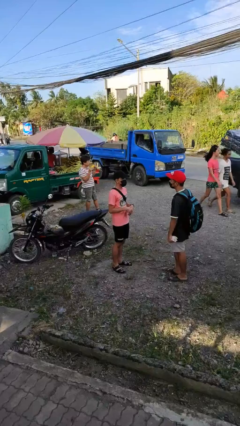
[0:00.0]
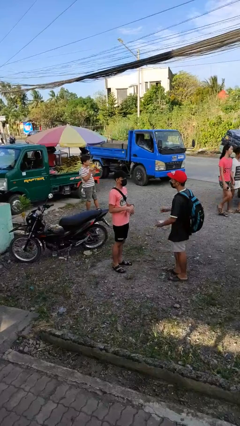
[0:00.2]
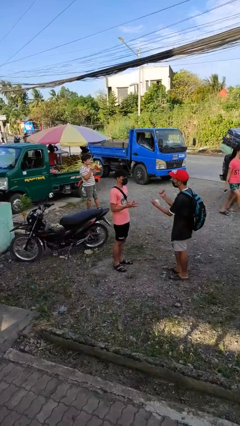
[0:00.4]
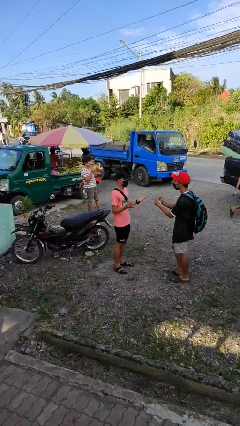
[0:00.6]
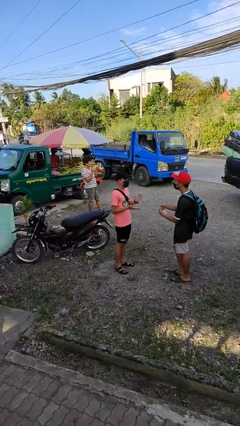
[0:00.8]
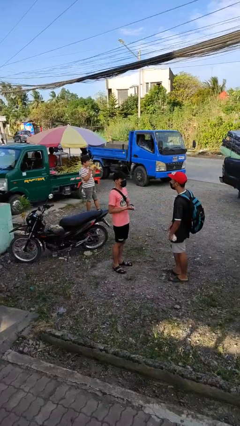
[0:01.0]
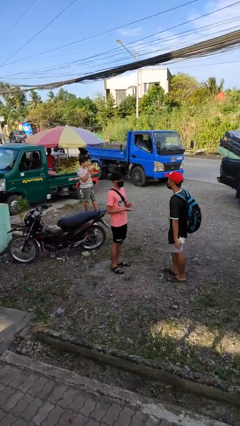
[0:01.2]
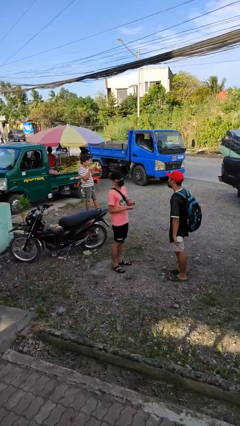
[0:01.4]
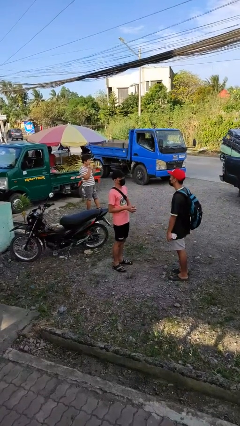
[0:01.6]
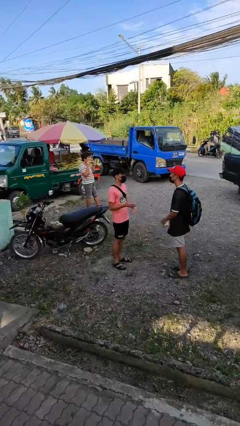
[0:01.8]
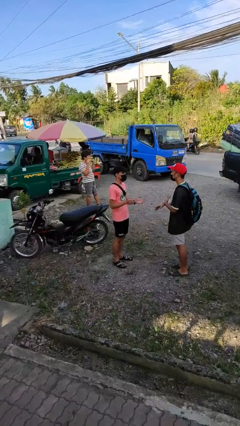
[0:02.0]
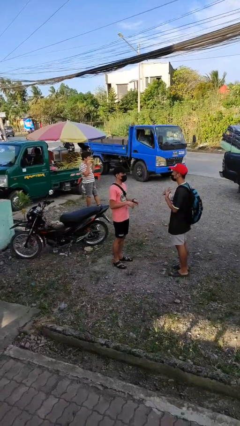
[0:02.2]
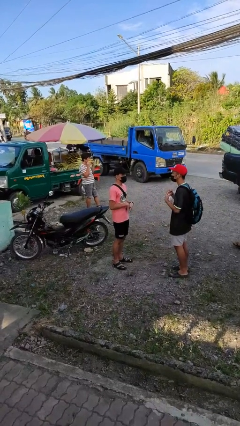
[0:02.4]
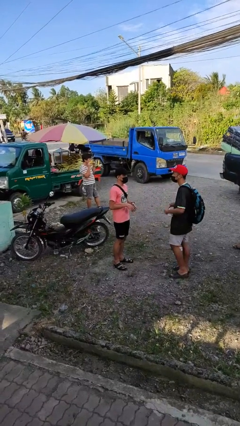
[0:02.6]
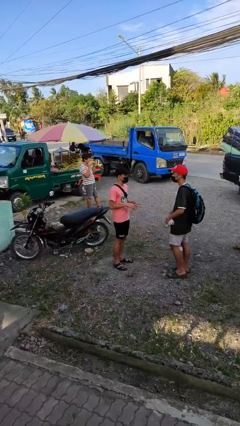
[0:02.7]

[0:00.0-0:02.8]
person talks to person

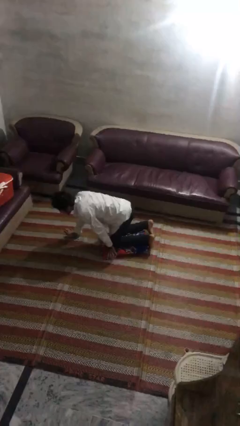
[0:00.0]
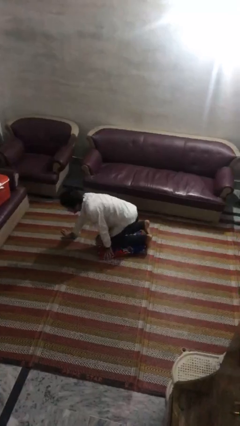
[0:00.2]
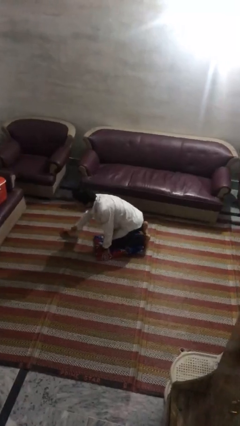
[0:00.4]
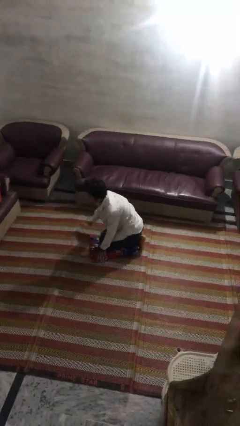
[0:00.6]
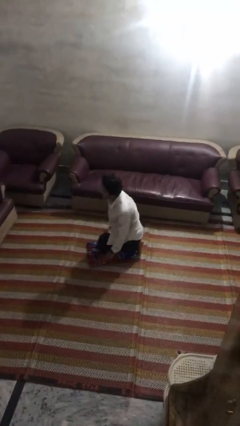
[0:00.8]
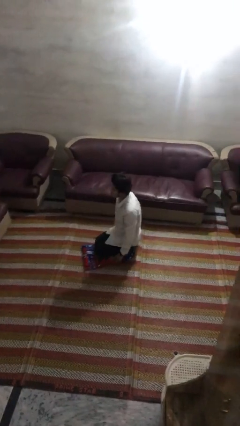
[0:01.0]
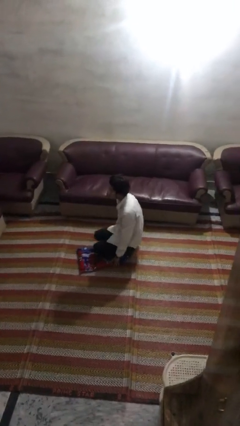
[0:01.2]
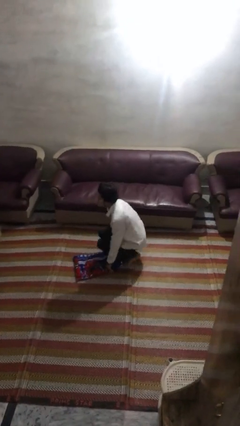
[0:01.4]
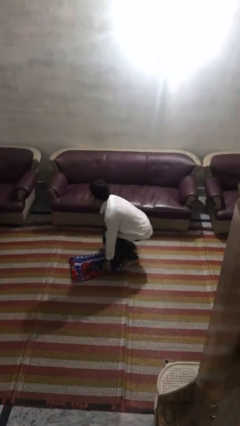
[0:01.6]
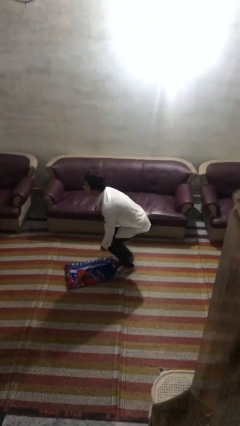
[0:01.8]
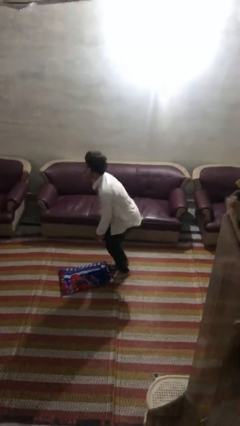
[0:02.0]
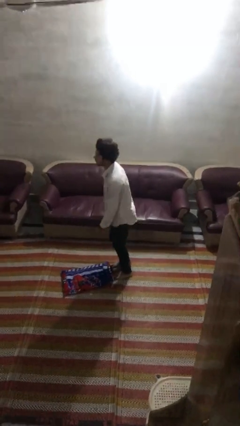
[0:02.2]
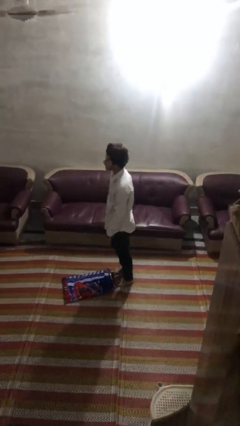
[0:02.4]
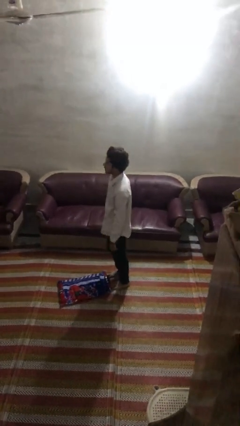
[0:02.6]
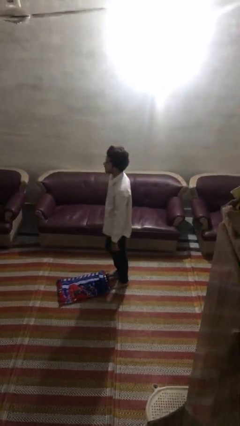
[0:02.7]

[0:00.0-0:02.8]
person stands up from floor

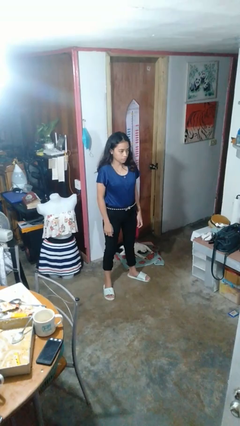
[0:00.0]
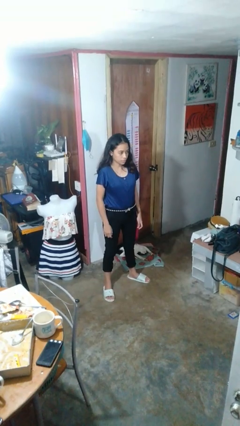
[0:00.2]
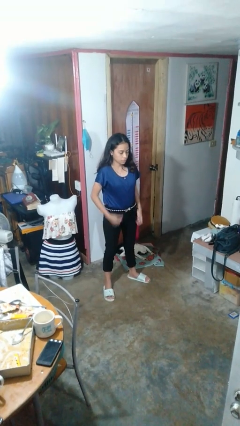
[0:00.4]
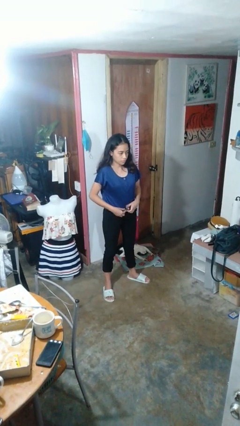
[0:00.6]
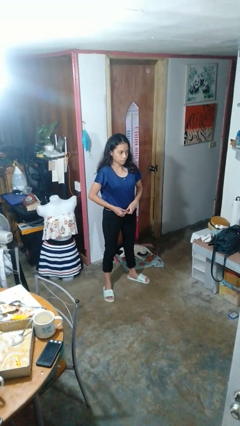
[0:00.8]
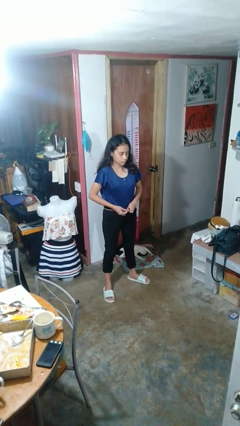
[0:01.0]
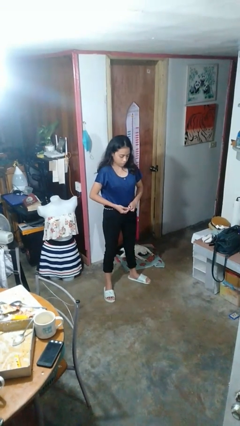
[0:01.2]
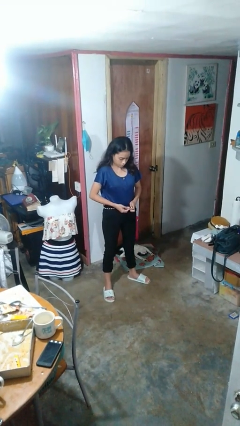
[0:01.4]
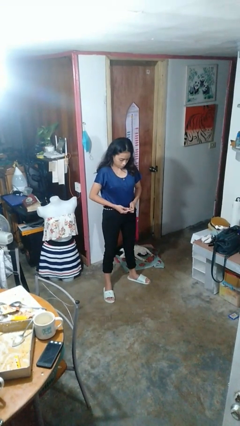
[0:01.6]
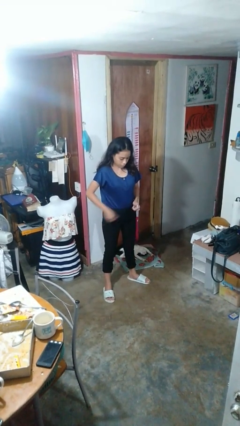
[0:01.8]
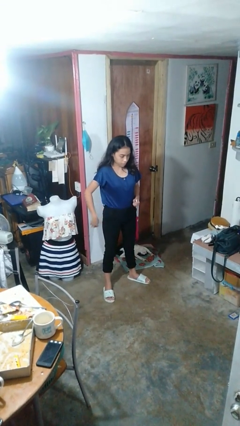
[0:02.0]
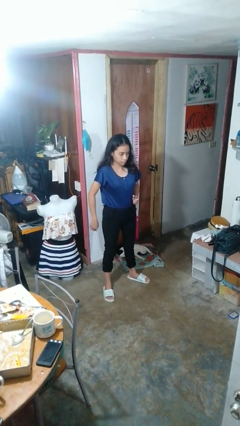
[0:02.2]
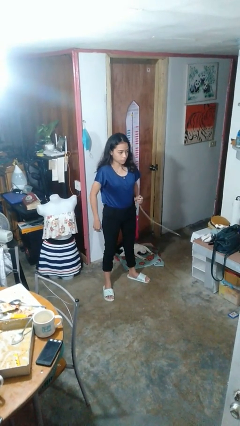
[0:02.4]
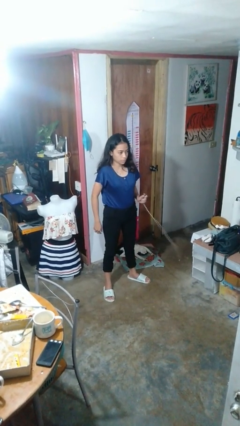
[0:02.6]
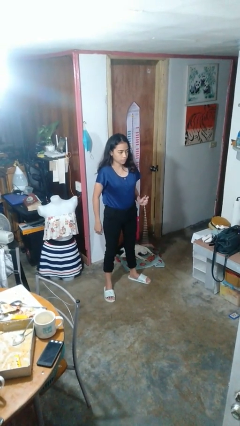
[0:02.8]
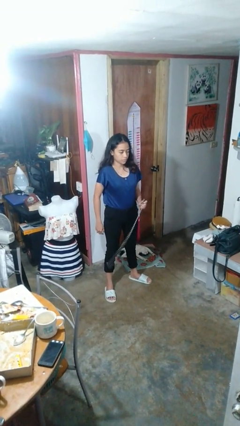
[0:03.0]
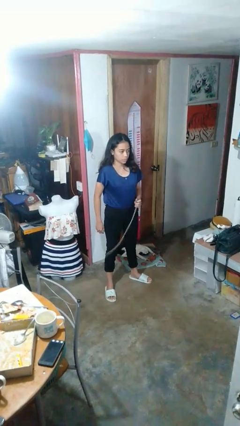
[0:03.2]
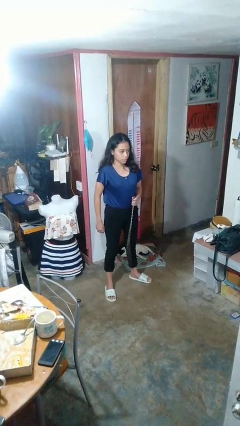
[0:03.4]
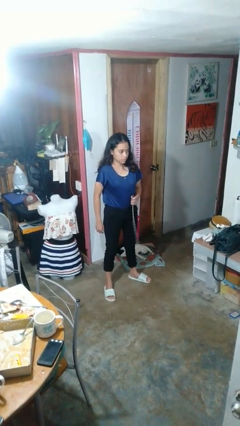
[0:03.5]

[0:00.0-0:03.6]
person takes off belt

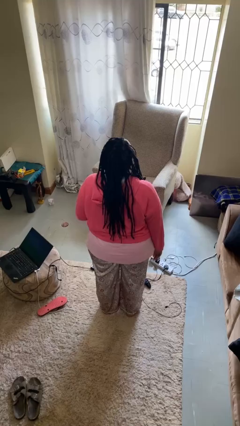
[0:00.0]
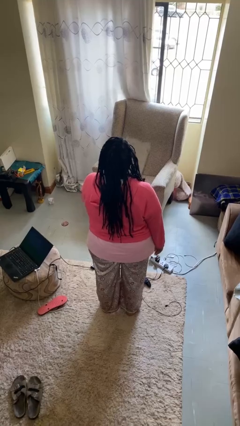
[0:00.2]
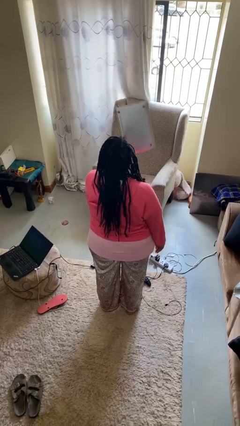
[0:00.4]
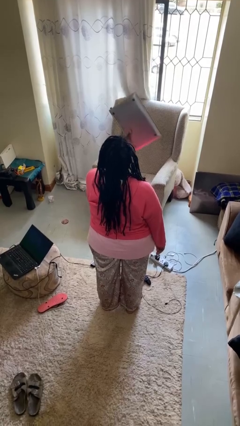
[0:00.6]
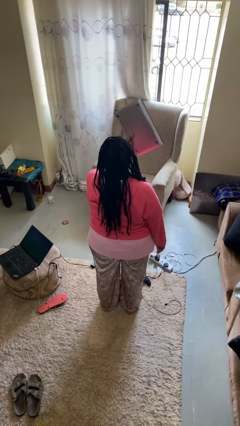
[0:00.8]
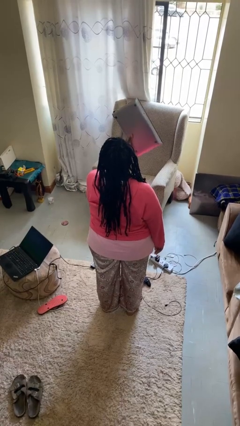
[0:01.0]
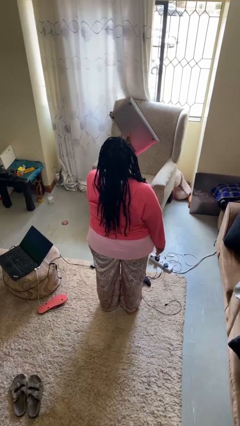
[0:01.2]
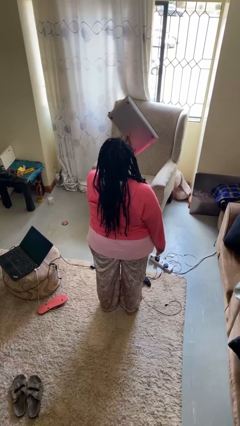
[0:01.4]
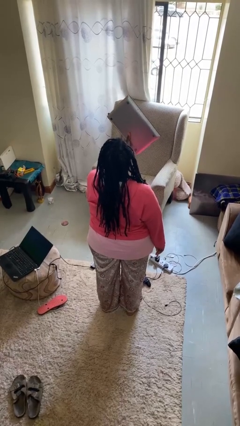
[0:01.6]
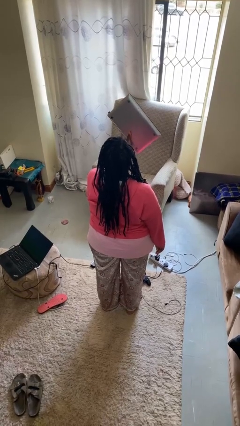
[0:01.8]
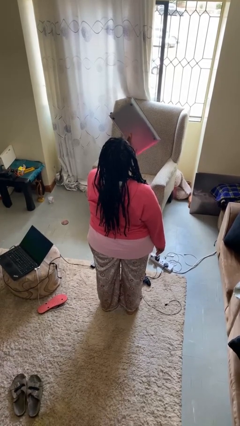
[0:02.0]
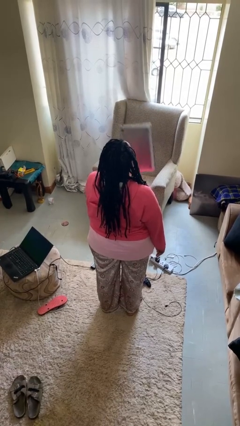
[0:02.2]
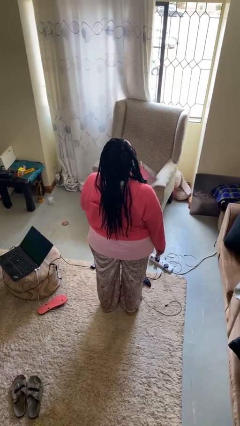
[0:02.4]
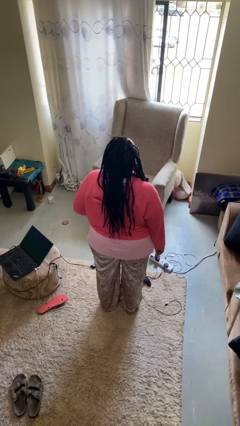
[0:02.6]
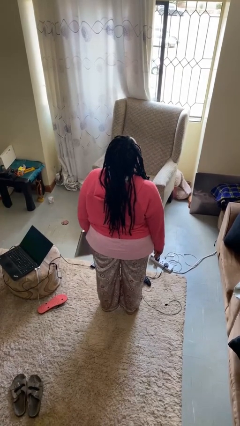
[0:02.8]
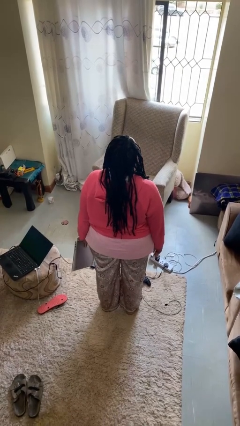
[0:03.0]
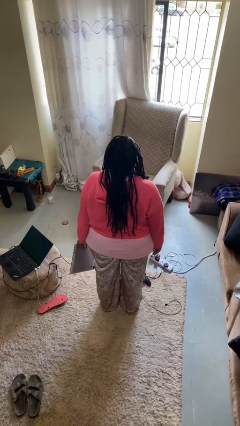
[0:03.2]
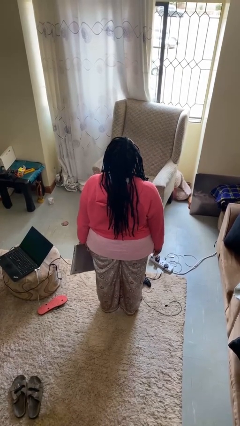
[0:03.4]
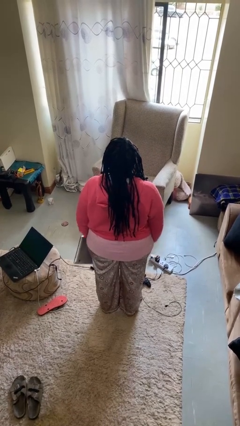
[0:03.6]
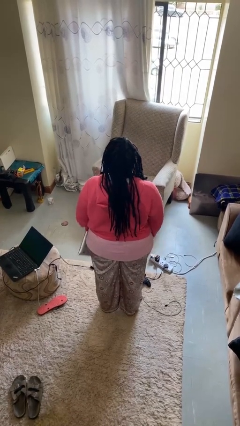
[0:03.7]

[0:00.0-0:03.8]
person holds object above head

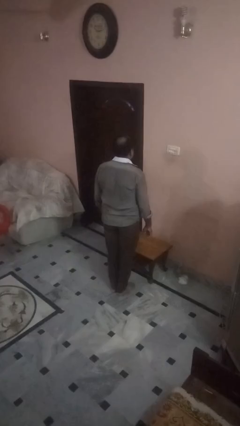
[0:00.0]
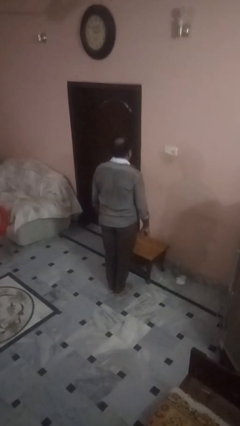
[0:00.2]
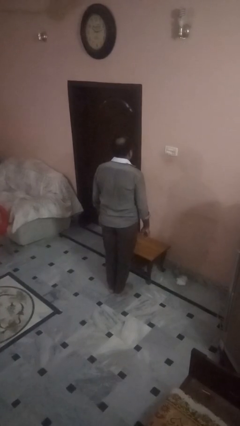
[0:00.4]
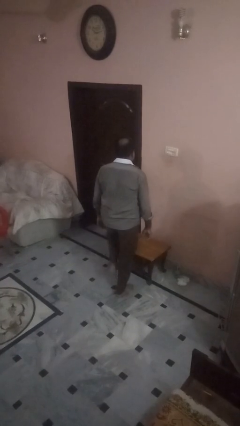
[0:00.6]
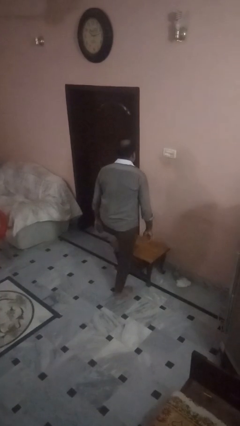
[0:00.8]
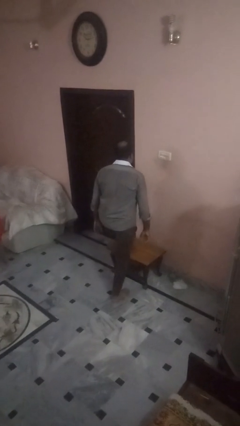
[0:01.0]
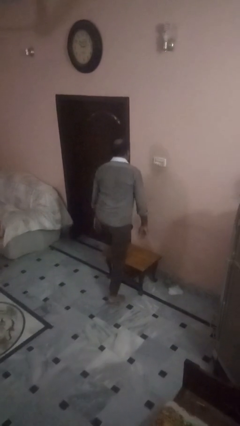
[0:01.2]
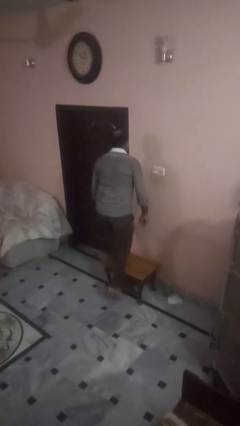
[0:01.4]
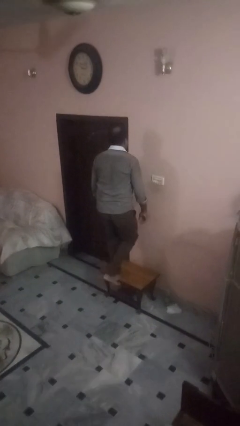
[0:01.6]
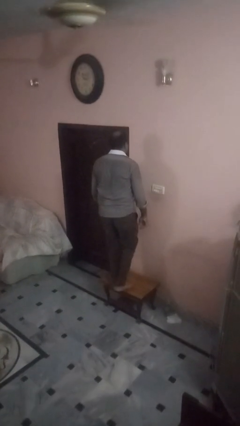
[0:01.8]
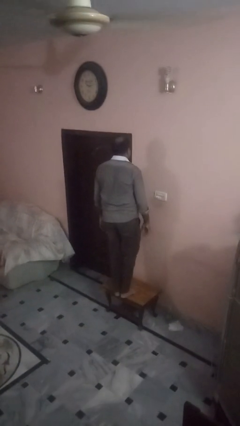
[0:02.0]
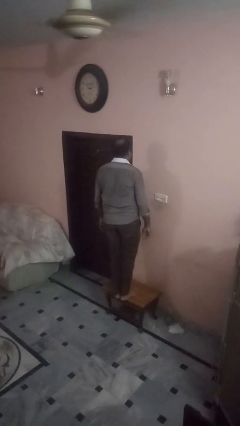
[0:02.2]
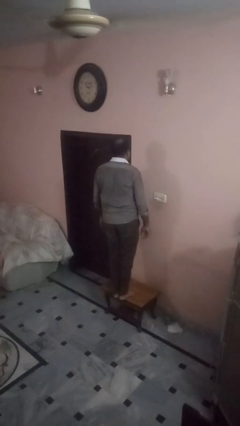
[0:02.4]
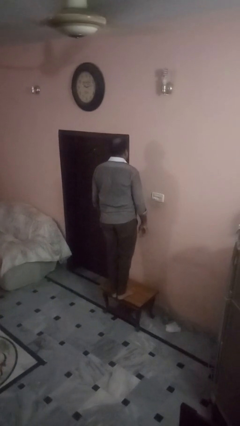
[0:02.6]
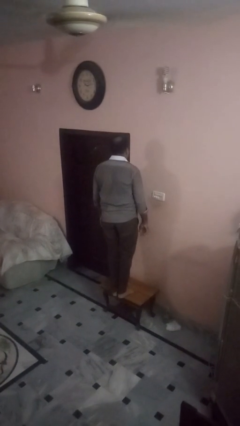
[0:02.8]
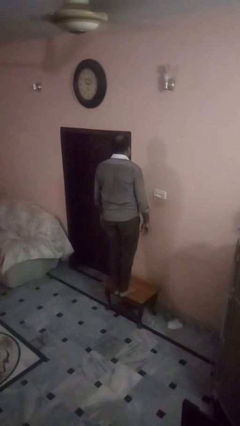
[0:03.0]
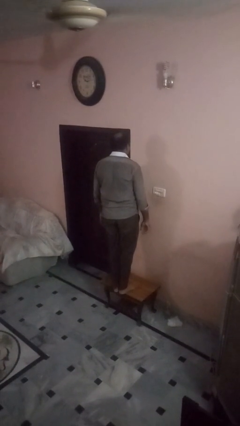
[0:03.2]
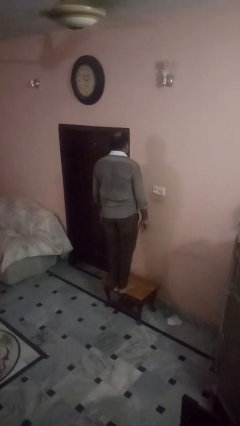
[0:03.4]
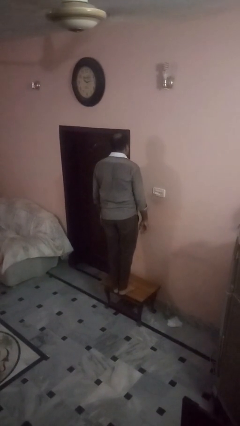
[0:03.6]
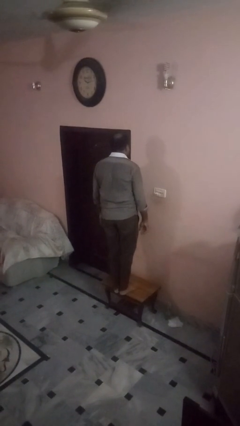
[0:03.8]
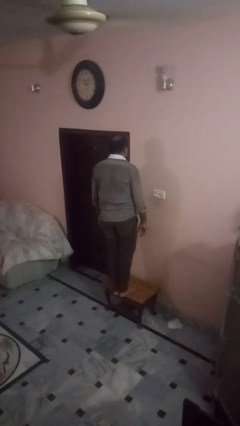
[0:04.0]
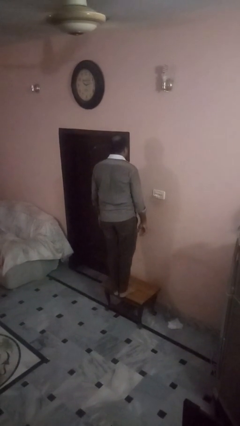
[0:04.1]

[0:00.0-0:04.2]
person climbs on table
